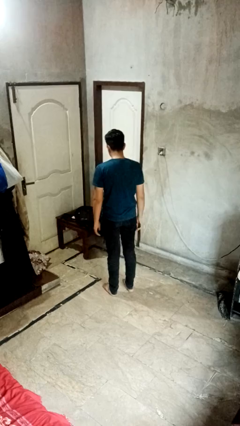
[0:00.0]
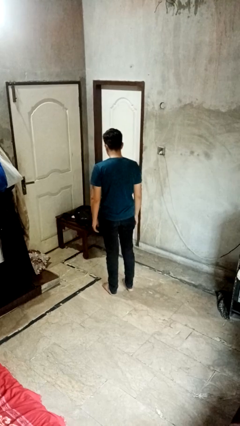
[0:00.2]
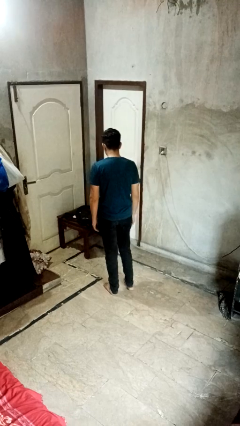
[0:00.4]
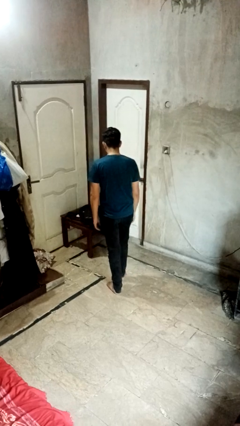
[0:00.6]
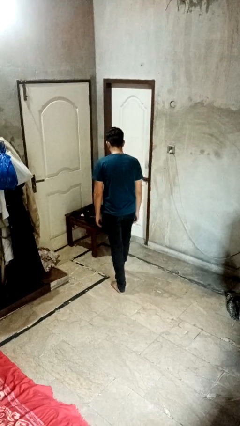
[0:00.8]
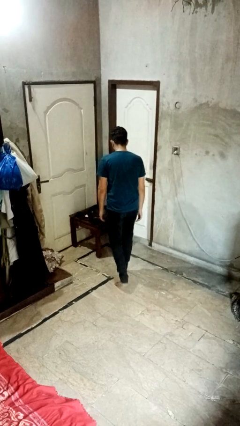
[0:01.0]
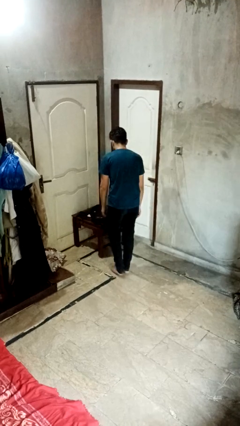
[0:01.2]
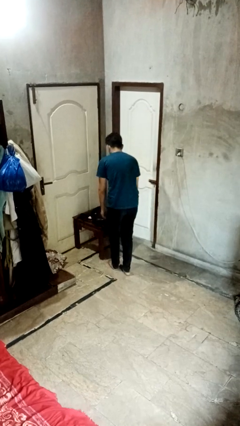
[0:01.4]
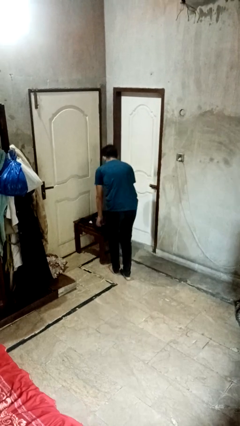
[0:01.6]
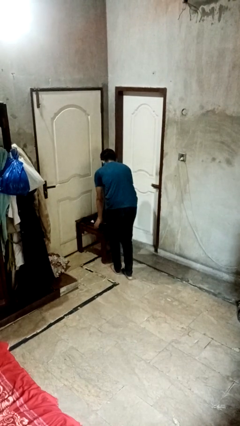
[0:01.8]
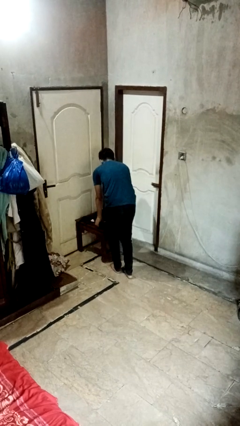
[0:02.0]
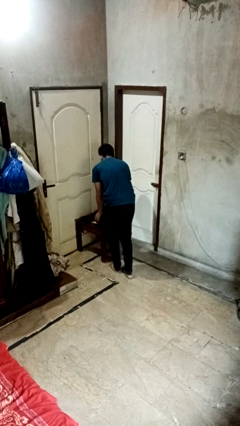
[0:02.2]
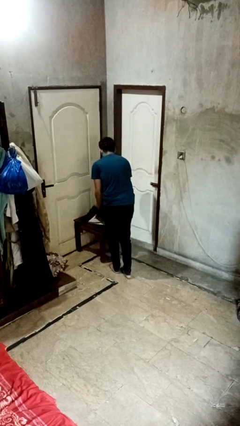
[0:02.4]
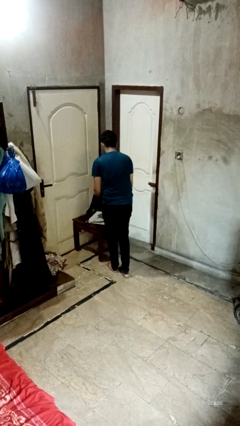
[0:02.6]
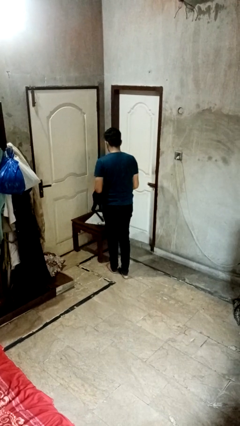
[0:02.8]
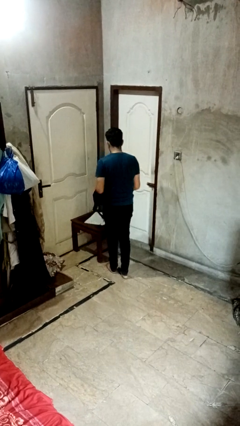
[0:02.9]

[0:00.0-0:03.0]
person picks up object from table

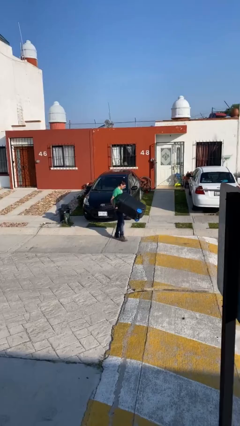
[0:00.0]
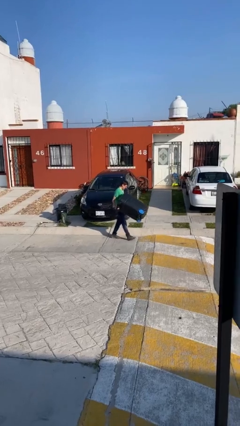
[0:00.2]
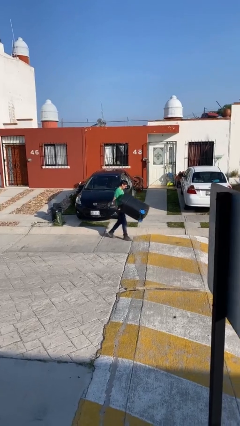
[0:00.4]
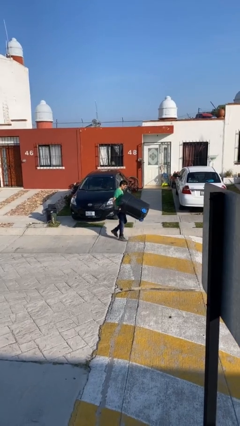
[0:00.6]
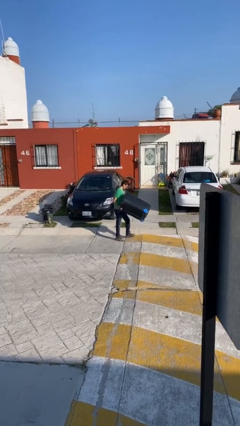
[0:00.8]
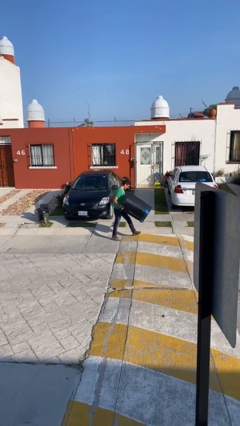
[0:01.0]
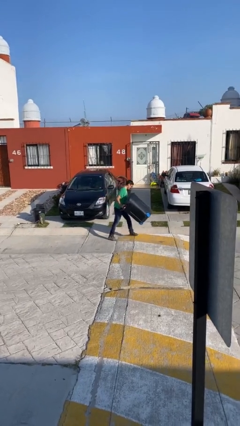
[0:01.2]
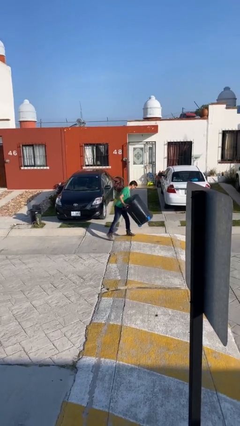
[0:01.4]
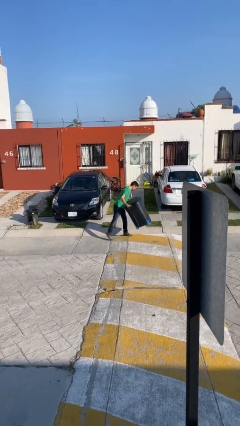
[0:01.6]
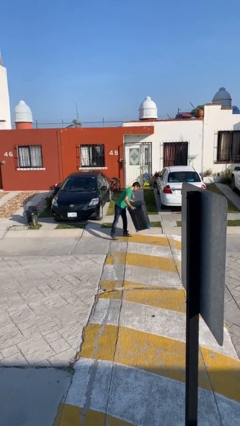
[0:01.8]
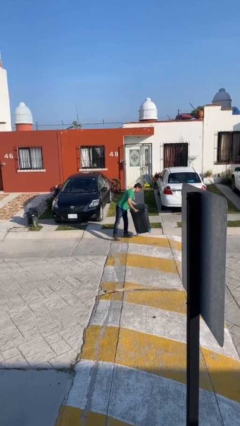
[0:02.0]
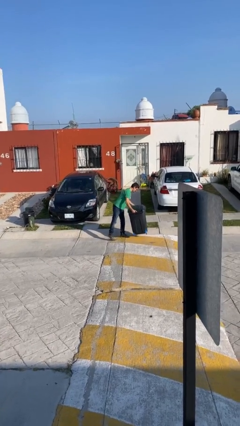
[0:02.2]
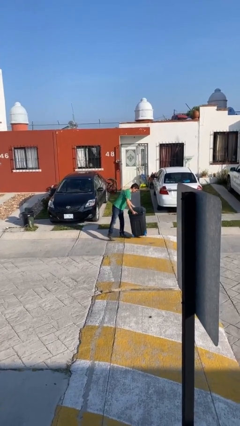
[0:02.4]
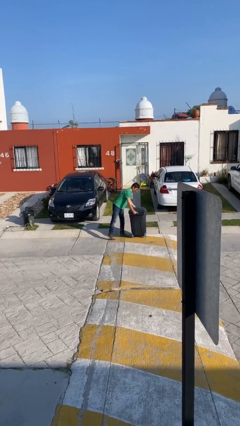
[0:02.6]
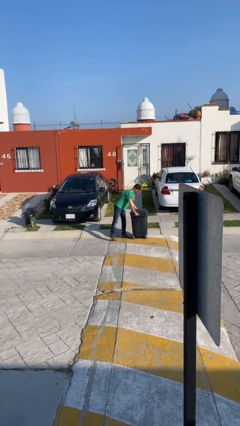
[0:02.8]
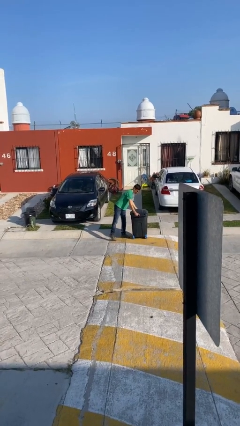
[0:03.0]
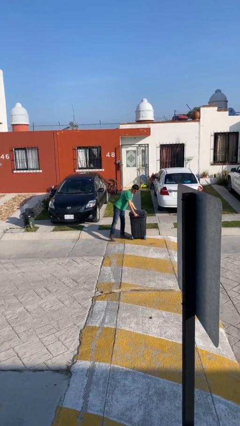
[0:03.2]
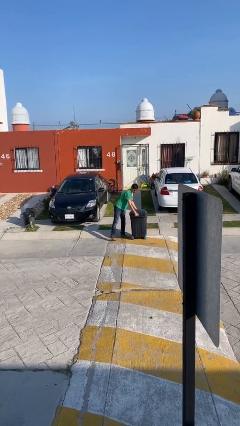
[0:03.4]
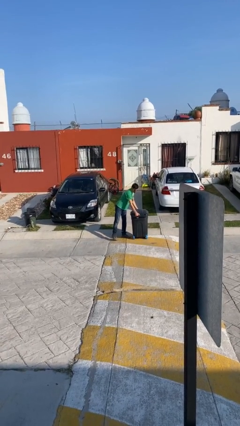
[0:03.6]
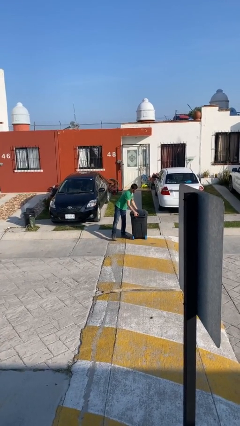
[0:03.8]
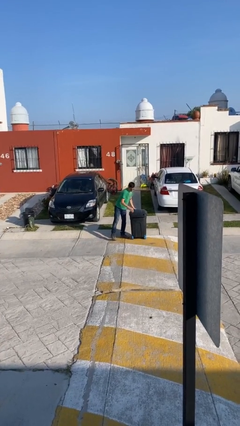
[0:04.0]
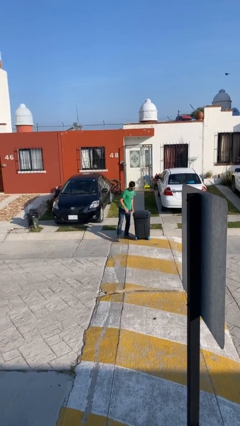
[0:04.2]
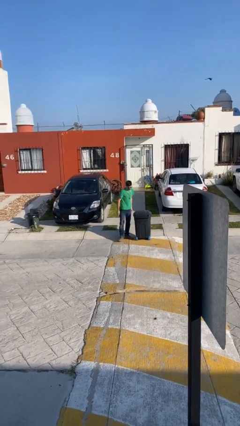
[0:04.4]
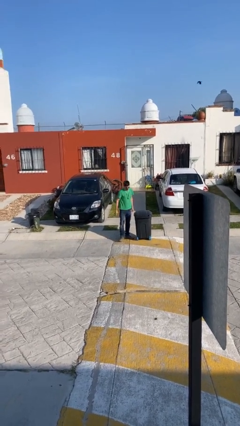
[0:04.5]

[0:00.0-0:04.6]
person puts down object on floor

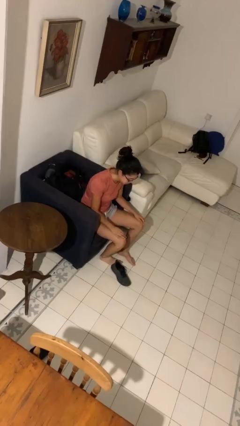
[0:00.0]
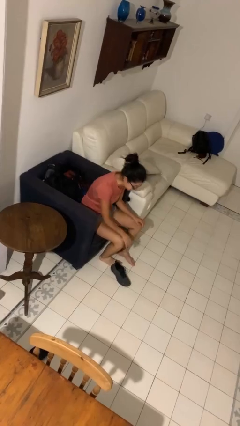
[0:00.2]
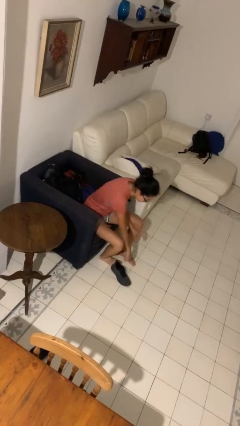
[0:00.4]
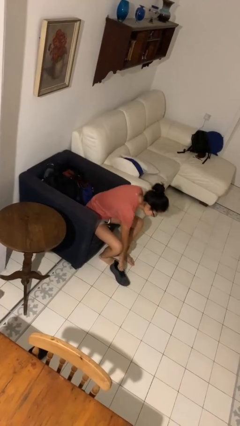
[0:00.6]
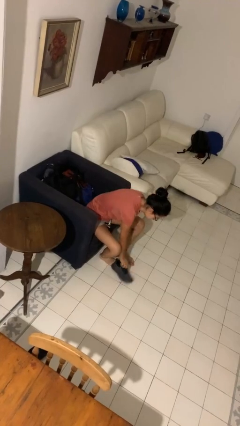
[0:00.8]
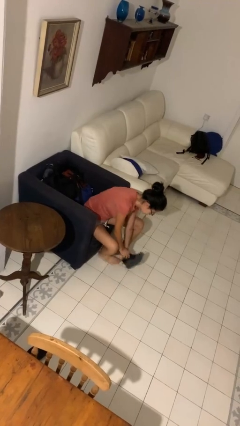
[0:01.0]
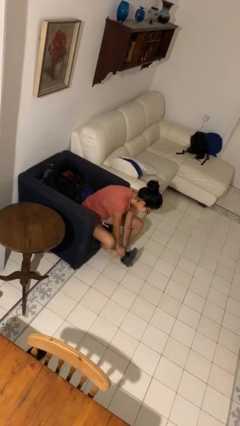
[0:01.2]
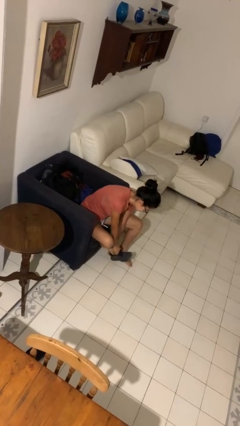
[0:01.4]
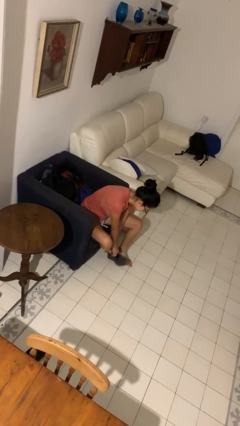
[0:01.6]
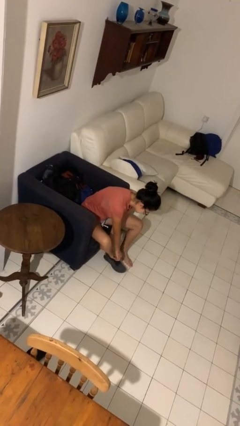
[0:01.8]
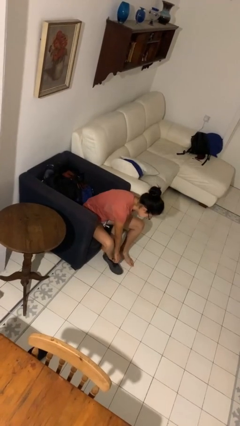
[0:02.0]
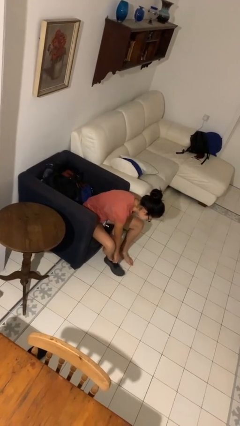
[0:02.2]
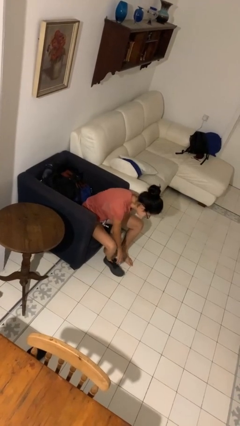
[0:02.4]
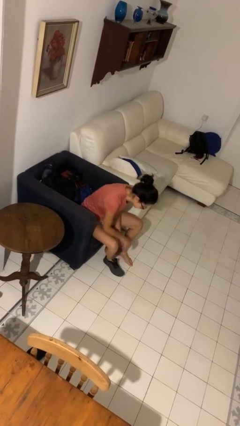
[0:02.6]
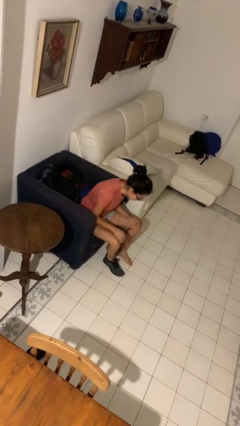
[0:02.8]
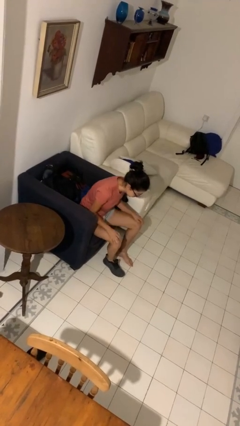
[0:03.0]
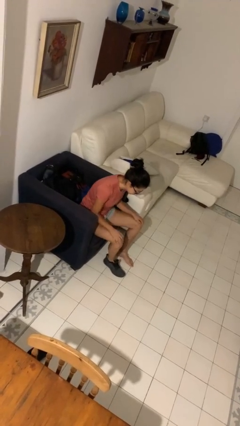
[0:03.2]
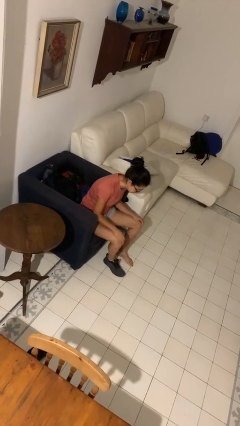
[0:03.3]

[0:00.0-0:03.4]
person puts on shoes

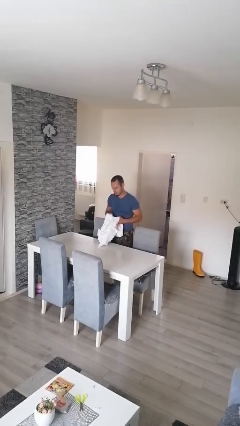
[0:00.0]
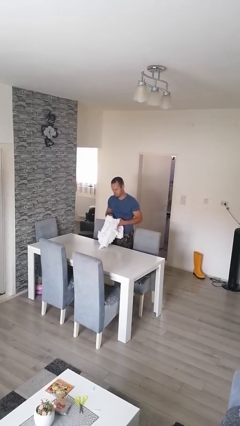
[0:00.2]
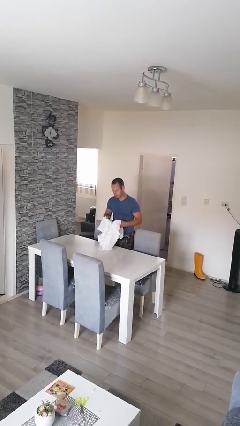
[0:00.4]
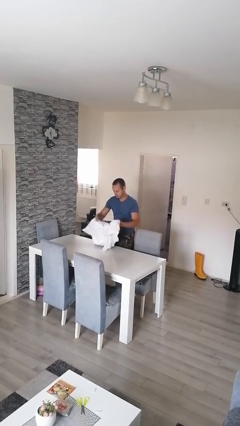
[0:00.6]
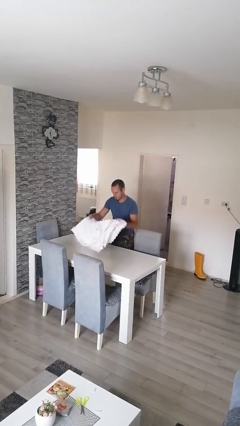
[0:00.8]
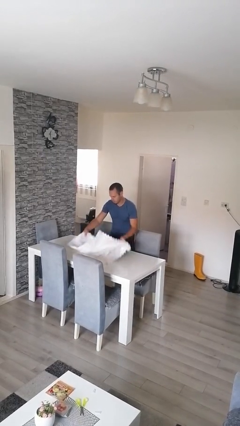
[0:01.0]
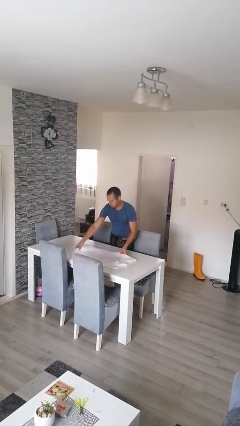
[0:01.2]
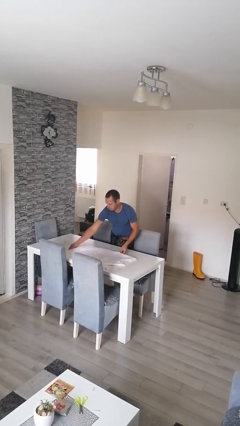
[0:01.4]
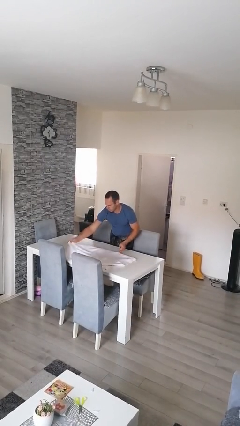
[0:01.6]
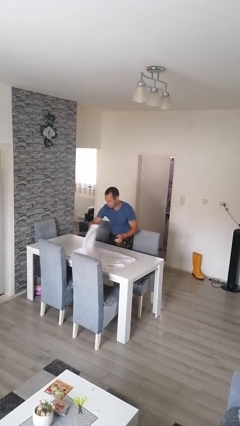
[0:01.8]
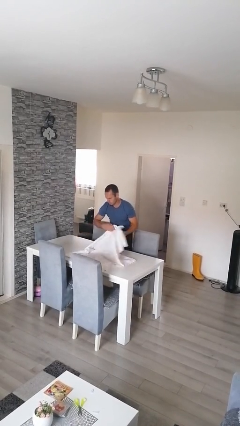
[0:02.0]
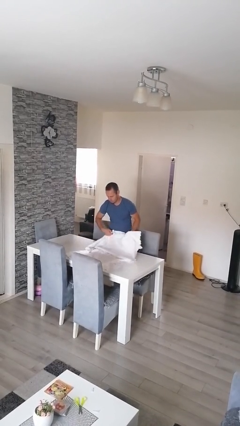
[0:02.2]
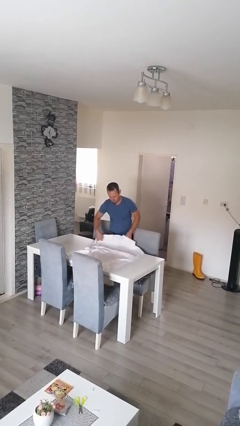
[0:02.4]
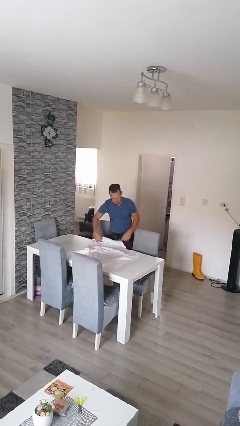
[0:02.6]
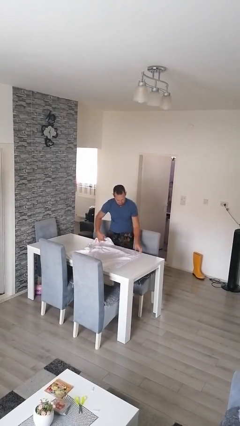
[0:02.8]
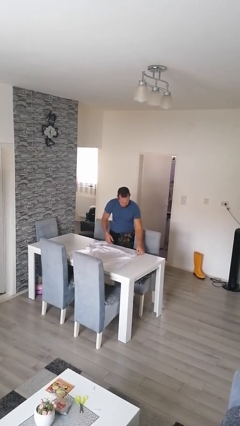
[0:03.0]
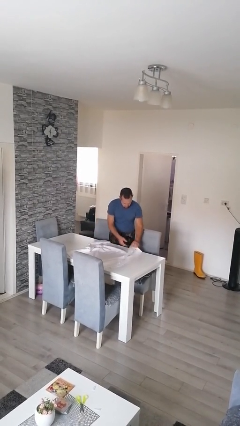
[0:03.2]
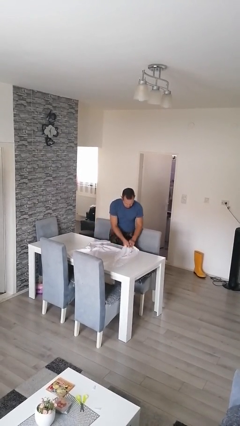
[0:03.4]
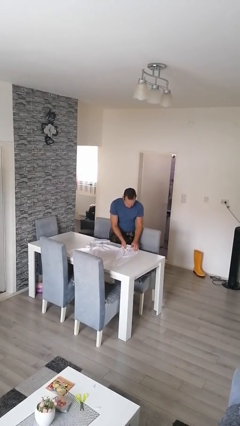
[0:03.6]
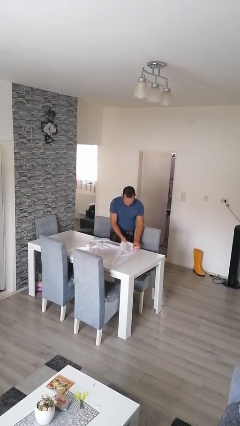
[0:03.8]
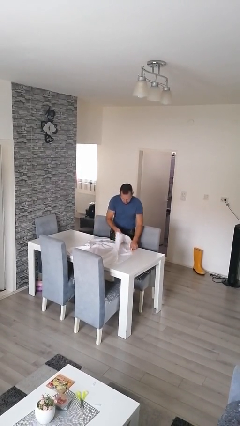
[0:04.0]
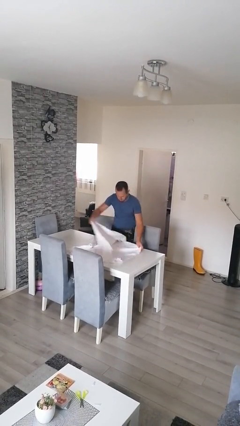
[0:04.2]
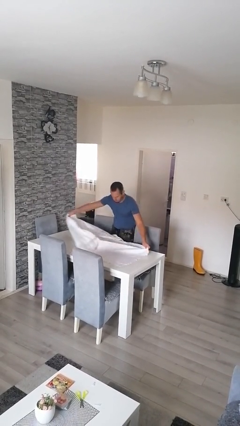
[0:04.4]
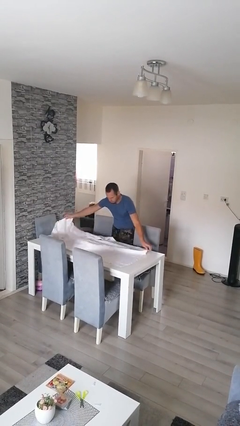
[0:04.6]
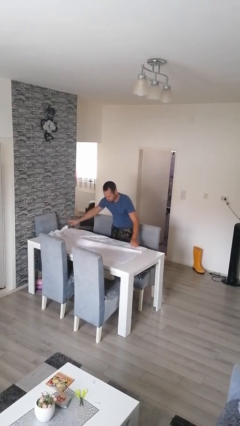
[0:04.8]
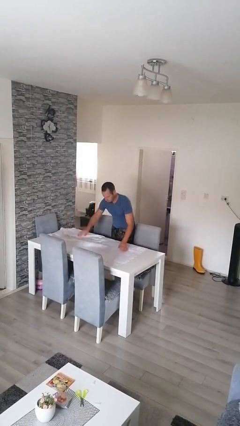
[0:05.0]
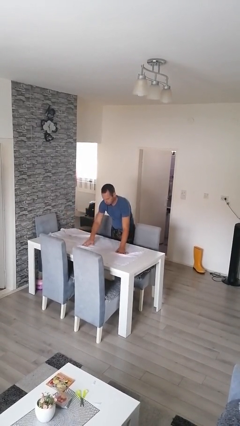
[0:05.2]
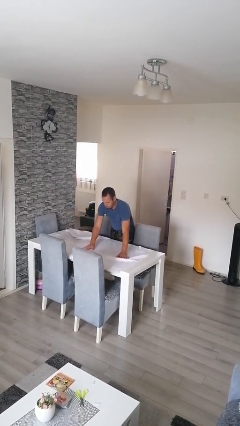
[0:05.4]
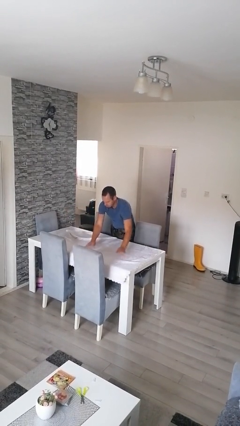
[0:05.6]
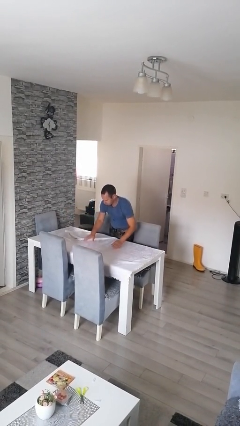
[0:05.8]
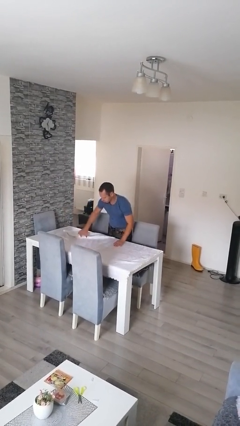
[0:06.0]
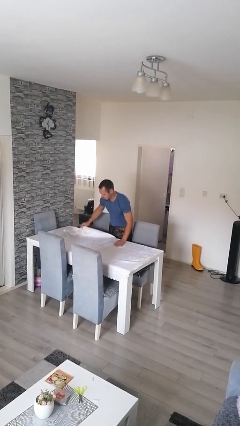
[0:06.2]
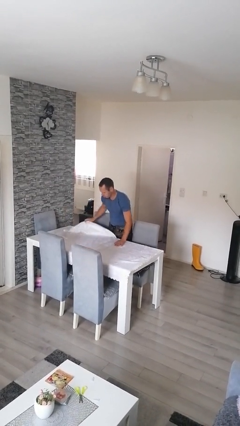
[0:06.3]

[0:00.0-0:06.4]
person spreads tablecloth

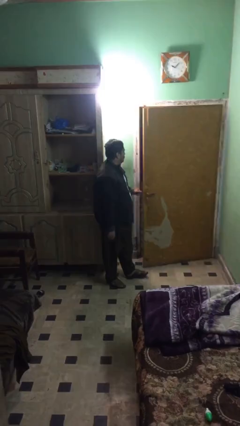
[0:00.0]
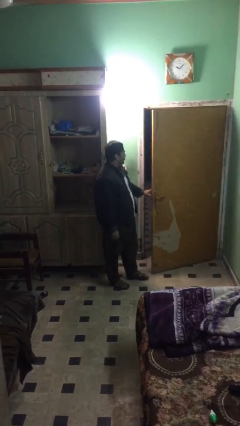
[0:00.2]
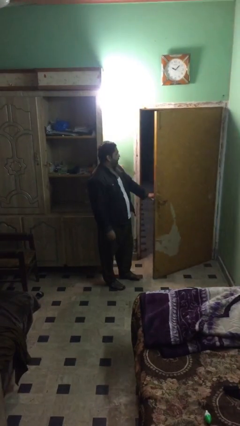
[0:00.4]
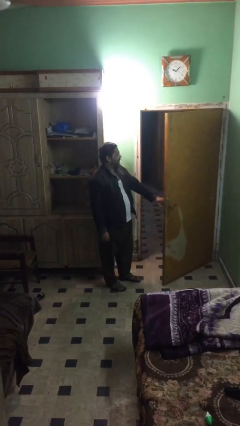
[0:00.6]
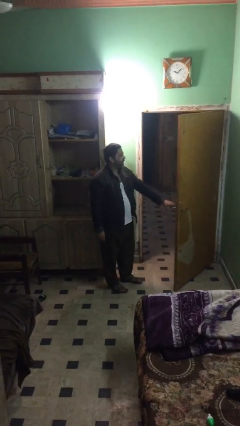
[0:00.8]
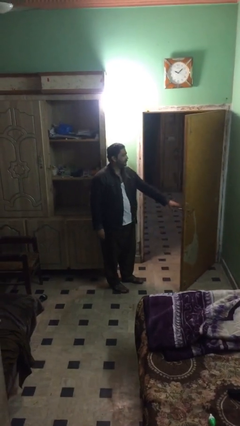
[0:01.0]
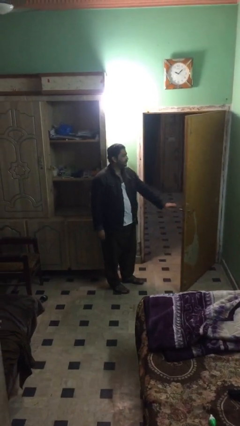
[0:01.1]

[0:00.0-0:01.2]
person opens facility door
